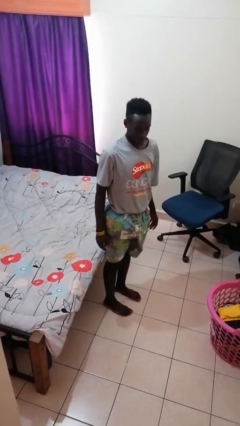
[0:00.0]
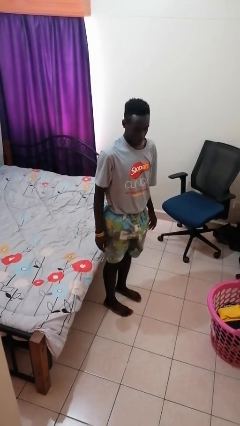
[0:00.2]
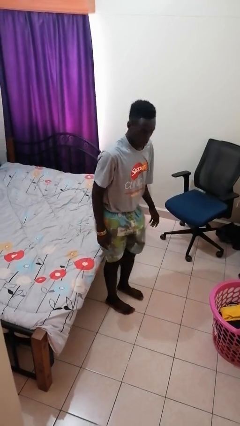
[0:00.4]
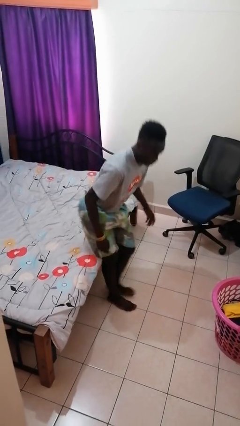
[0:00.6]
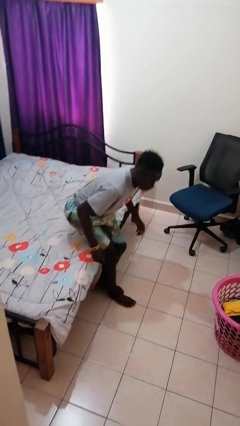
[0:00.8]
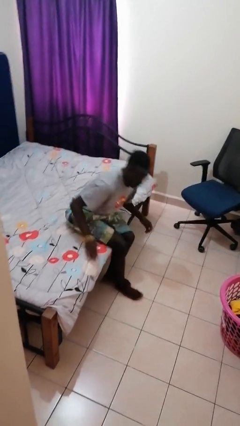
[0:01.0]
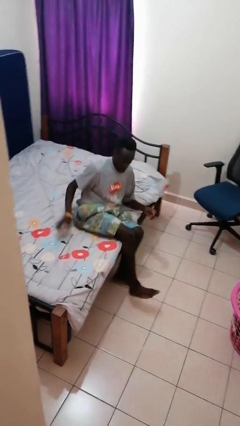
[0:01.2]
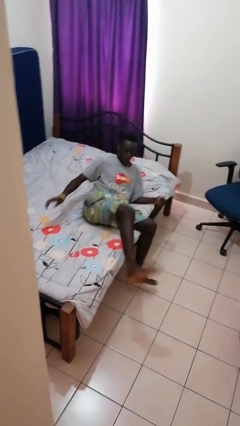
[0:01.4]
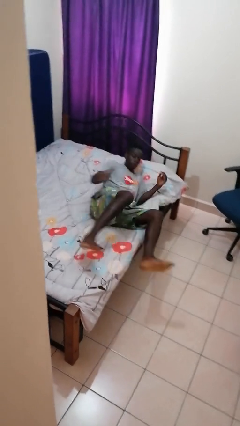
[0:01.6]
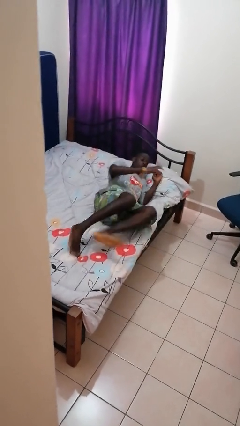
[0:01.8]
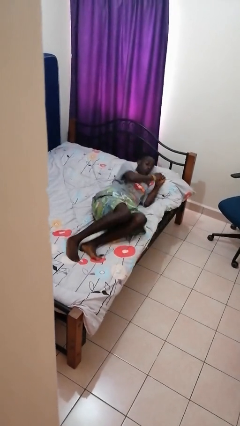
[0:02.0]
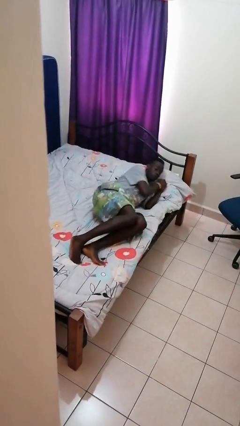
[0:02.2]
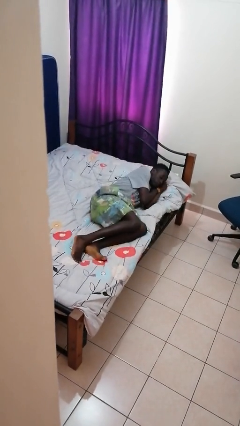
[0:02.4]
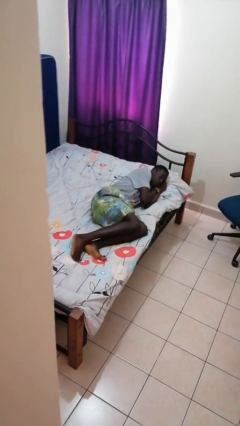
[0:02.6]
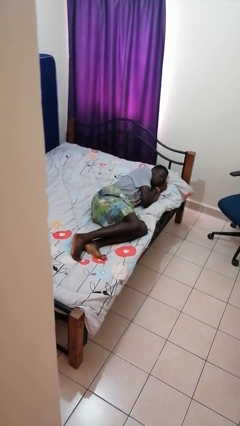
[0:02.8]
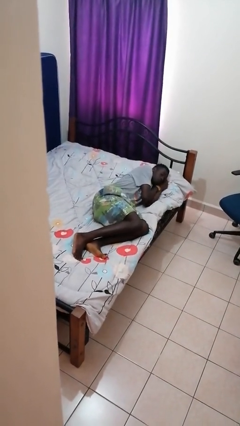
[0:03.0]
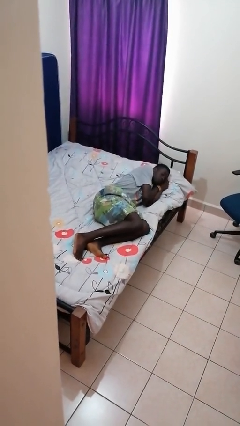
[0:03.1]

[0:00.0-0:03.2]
person lies down on bed

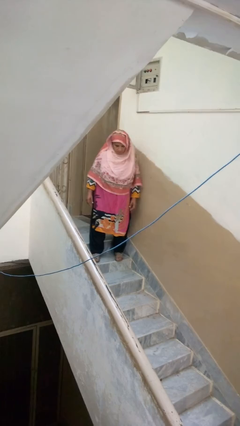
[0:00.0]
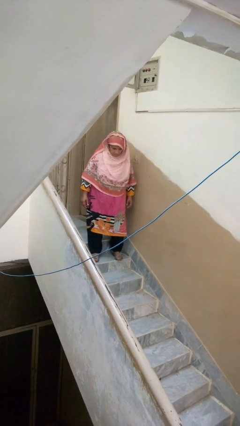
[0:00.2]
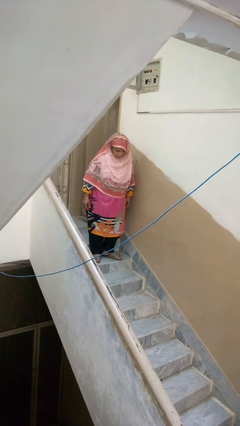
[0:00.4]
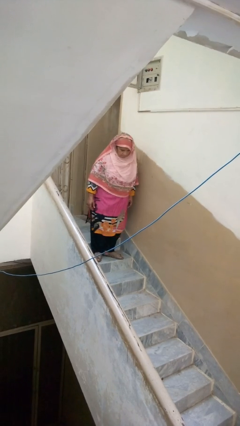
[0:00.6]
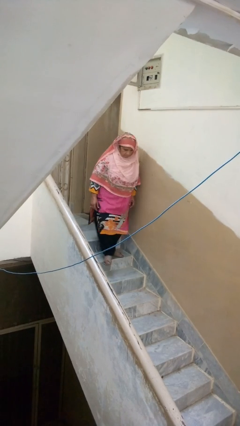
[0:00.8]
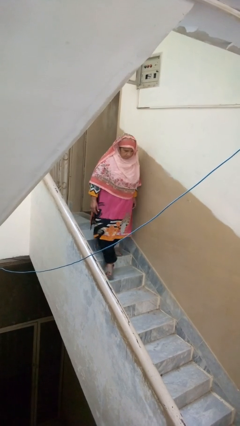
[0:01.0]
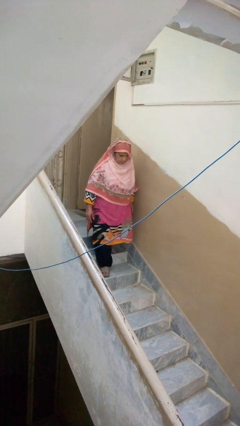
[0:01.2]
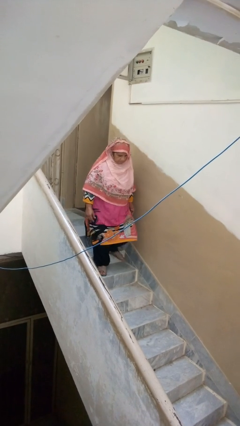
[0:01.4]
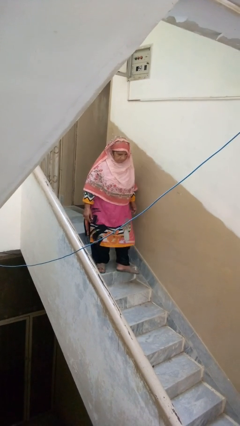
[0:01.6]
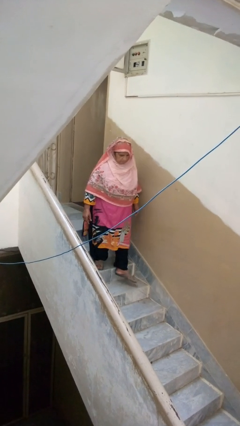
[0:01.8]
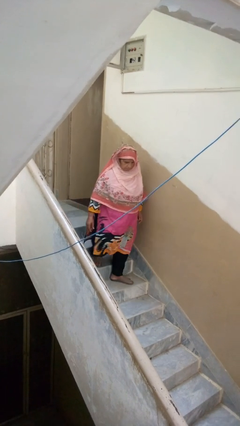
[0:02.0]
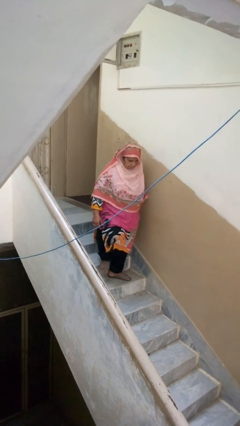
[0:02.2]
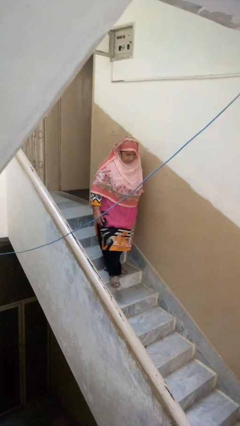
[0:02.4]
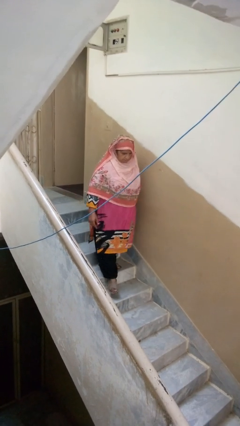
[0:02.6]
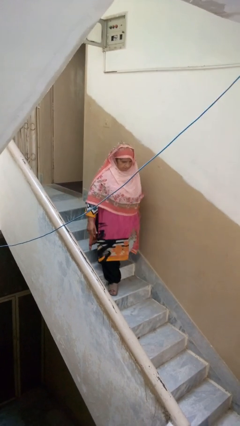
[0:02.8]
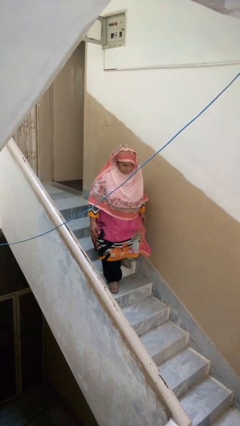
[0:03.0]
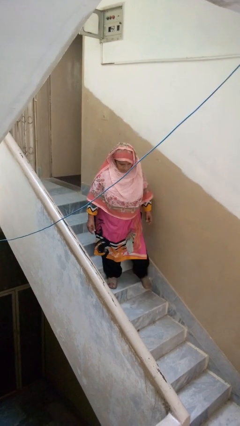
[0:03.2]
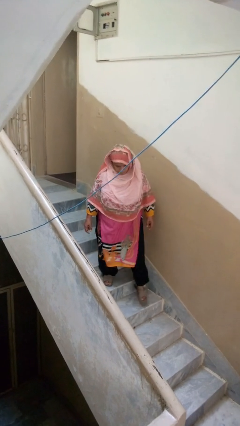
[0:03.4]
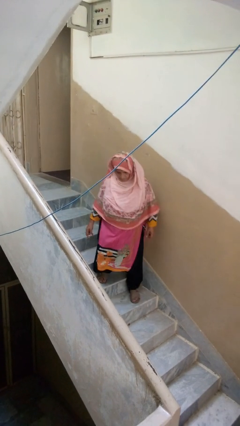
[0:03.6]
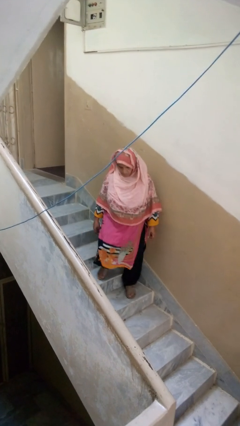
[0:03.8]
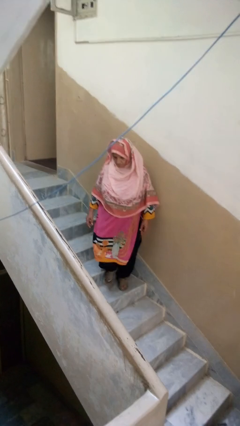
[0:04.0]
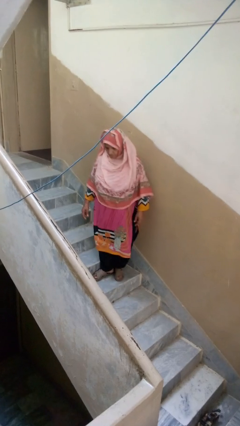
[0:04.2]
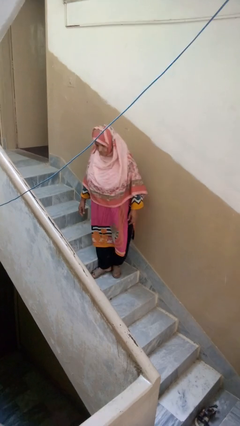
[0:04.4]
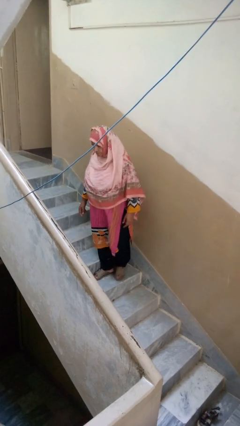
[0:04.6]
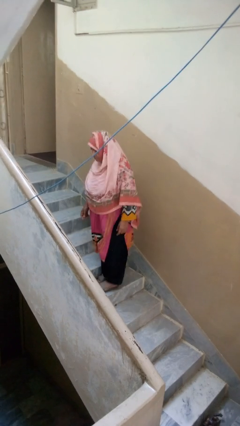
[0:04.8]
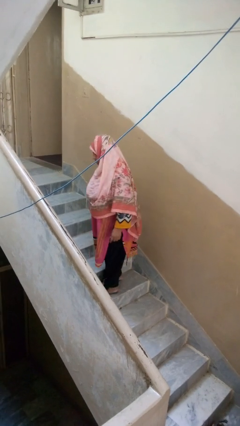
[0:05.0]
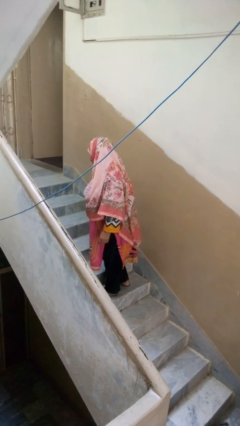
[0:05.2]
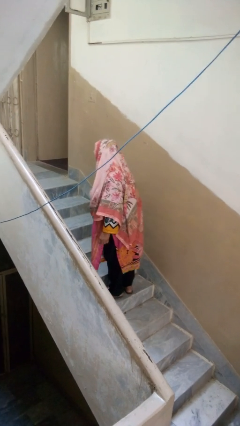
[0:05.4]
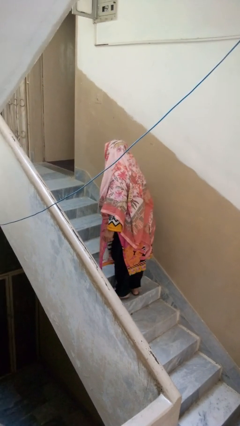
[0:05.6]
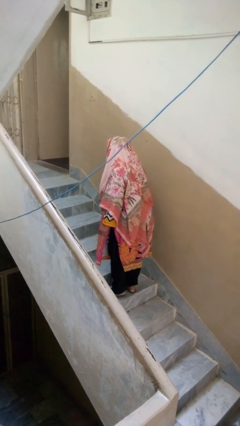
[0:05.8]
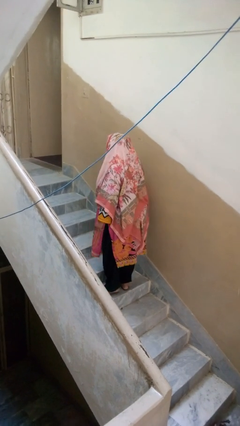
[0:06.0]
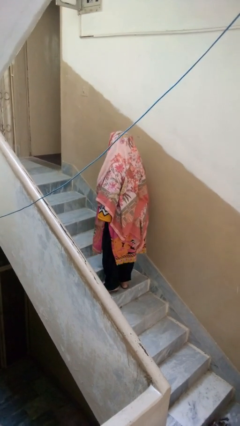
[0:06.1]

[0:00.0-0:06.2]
person climbs down stairs

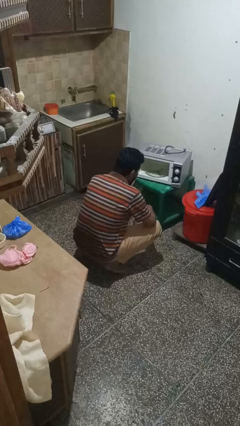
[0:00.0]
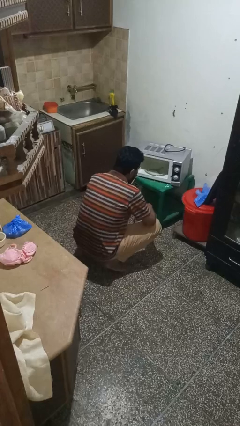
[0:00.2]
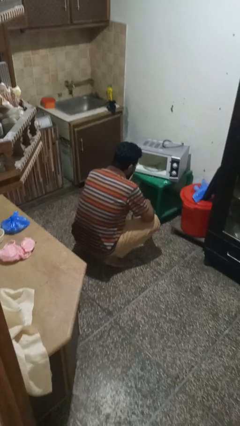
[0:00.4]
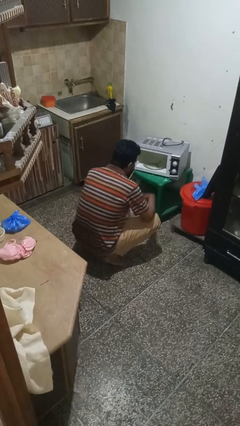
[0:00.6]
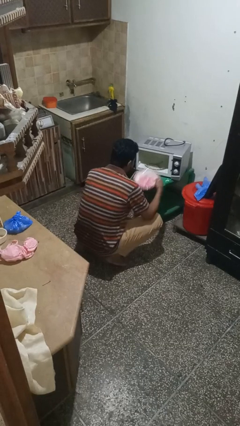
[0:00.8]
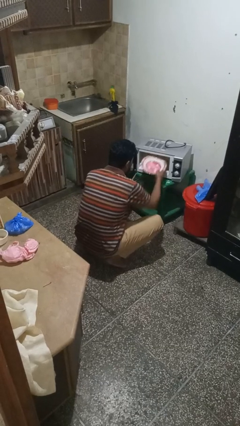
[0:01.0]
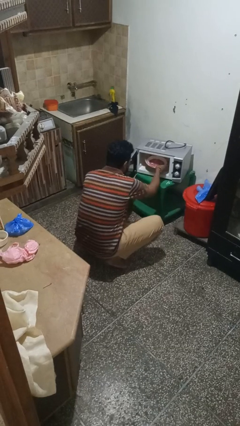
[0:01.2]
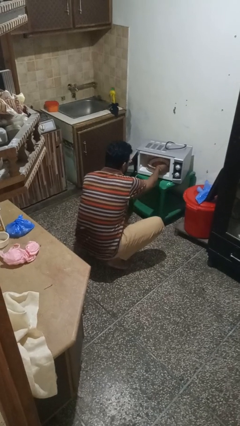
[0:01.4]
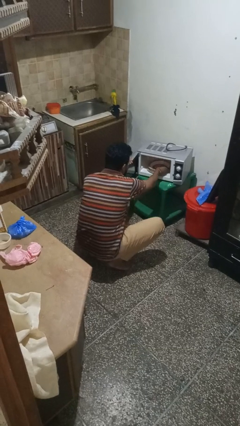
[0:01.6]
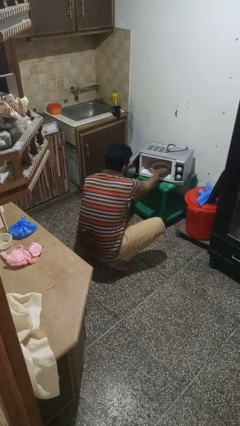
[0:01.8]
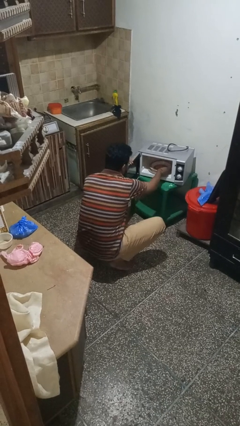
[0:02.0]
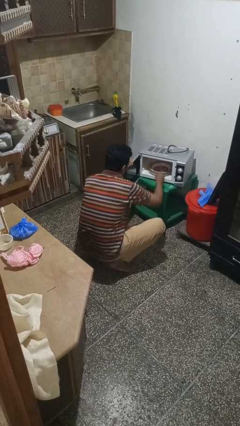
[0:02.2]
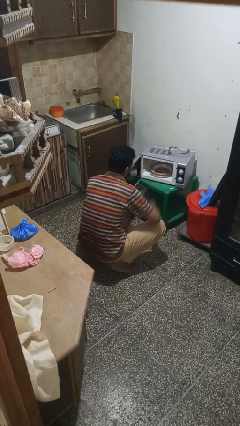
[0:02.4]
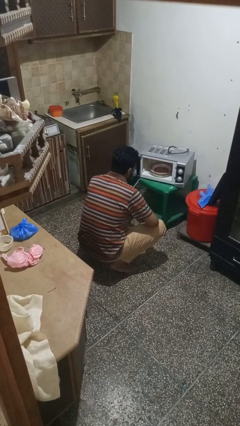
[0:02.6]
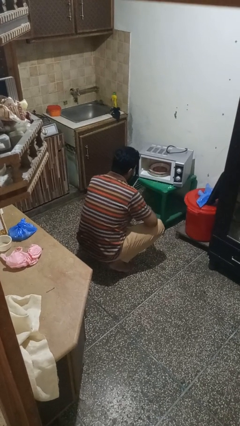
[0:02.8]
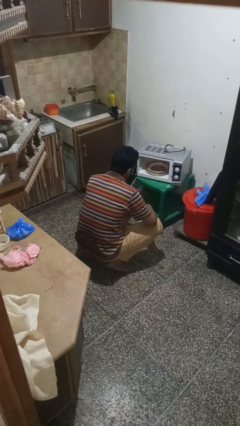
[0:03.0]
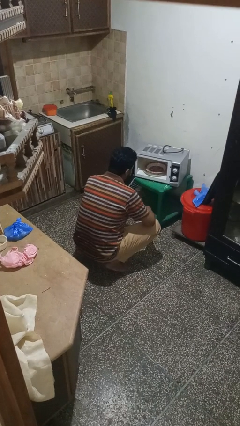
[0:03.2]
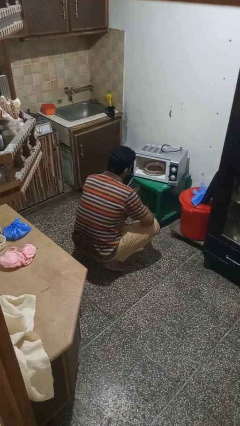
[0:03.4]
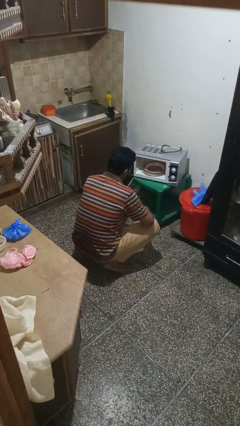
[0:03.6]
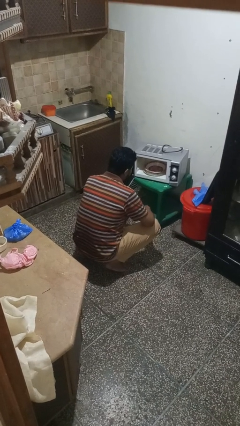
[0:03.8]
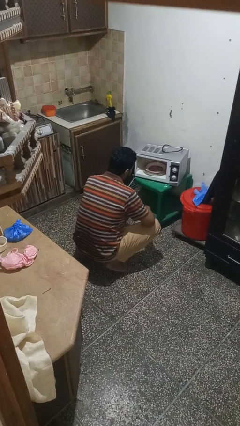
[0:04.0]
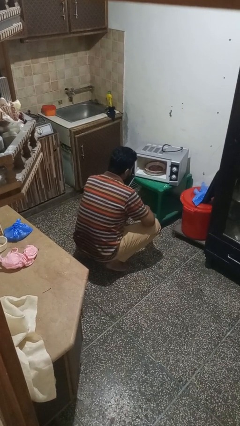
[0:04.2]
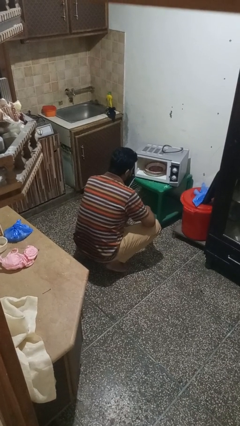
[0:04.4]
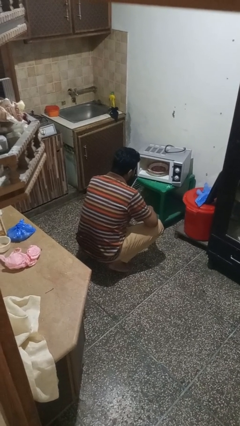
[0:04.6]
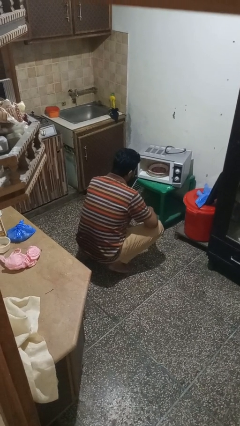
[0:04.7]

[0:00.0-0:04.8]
person puts object into microwave

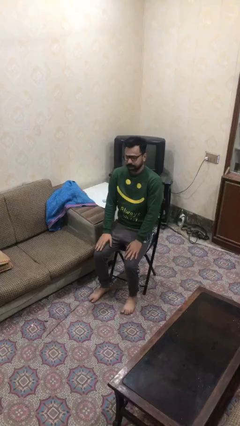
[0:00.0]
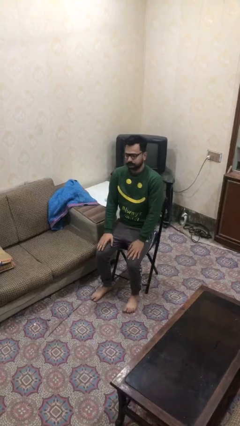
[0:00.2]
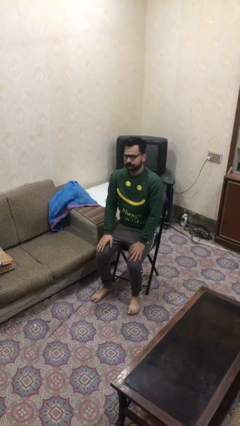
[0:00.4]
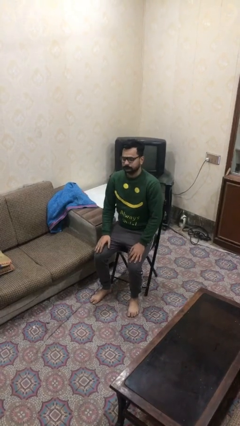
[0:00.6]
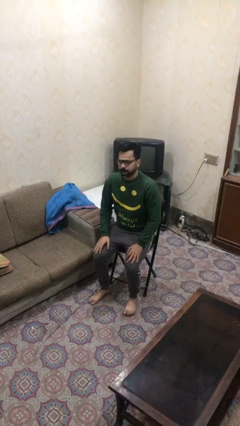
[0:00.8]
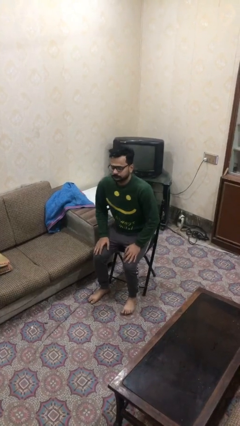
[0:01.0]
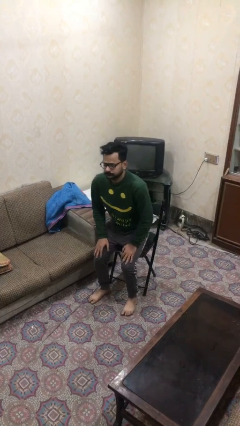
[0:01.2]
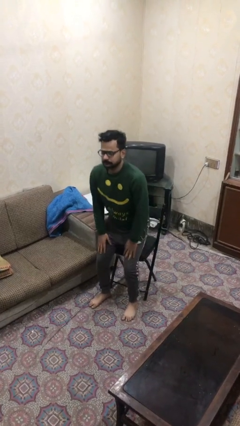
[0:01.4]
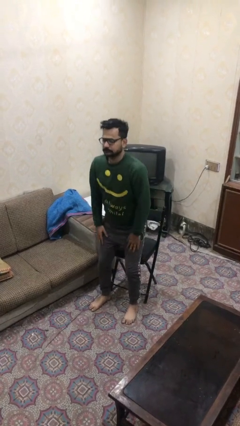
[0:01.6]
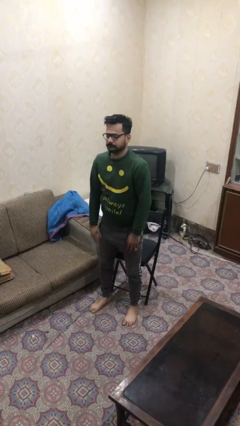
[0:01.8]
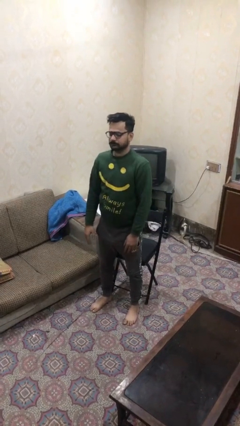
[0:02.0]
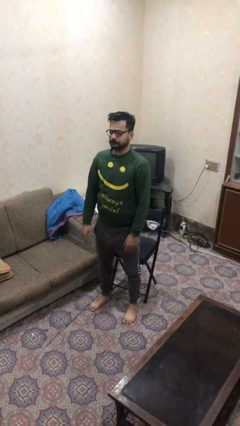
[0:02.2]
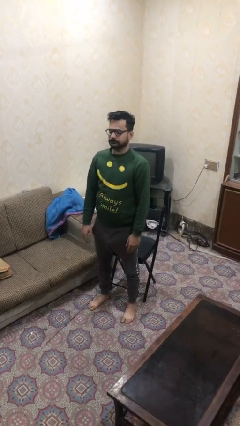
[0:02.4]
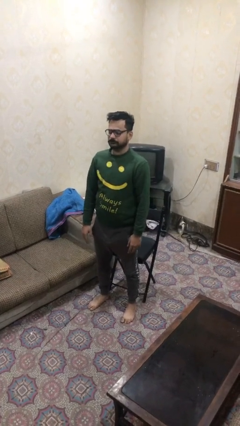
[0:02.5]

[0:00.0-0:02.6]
person stands up

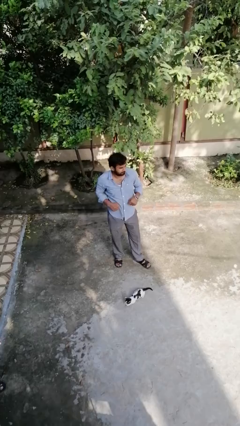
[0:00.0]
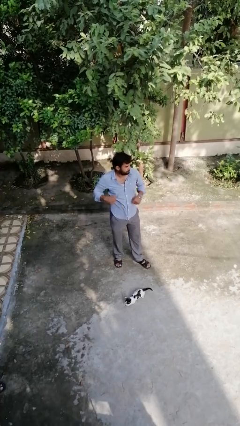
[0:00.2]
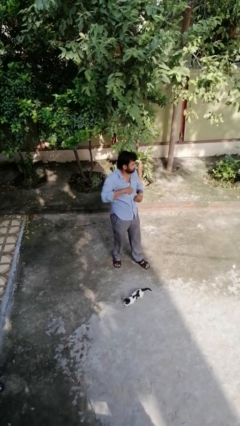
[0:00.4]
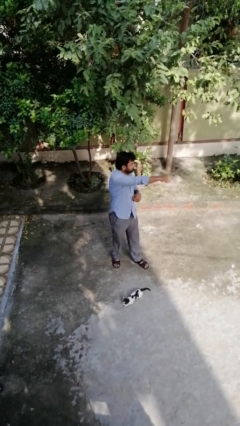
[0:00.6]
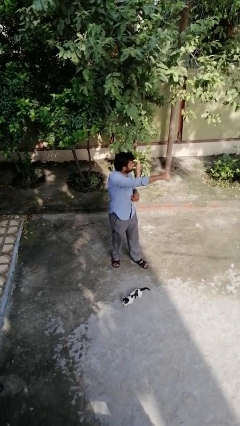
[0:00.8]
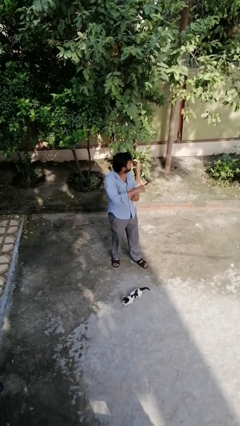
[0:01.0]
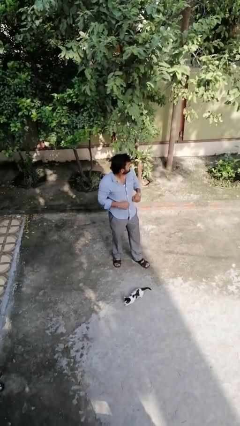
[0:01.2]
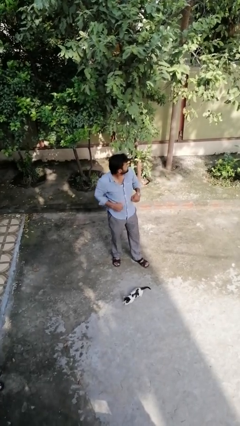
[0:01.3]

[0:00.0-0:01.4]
person punches
